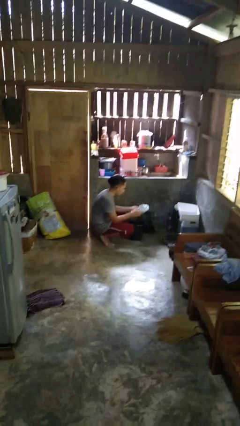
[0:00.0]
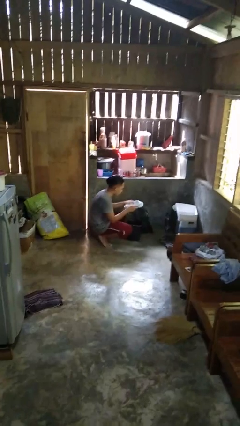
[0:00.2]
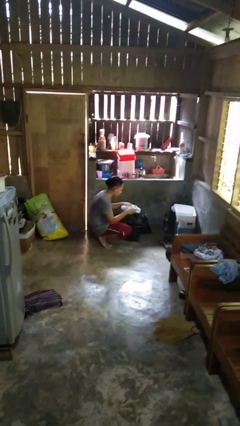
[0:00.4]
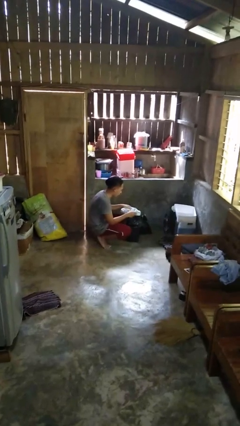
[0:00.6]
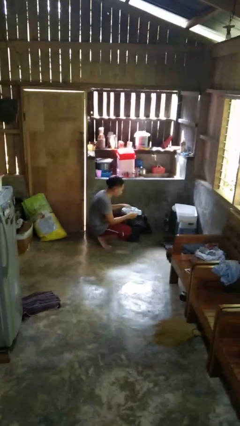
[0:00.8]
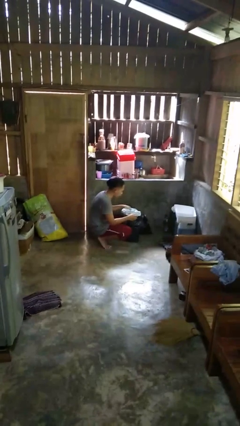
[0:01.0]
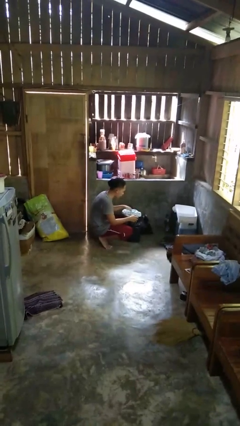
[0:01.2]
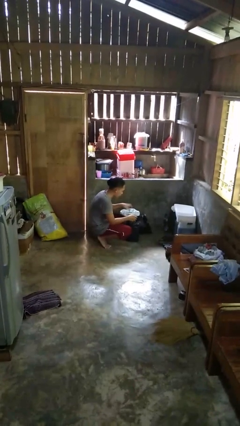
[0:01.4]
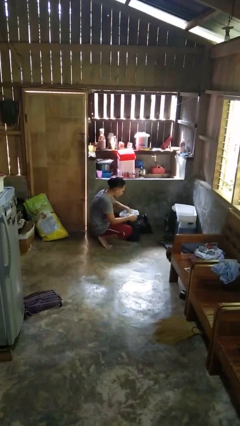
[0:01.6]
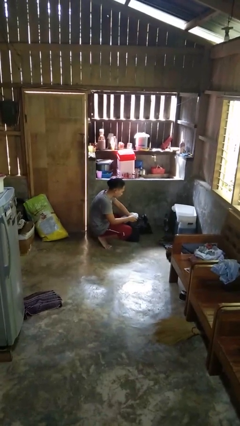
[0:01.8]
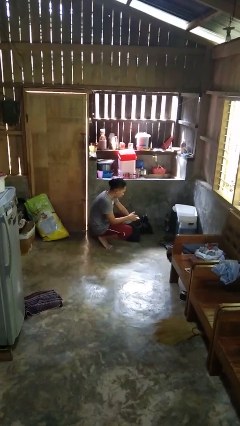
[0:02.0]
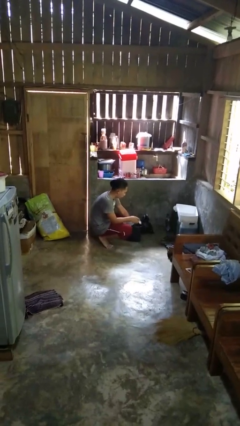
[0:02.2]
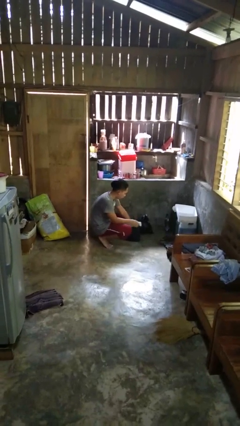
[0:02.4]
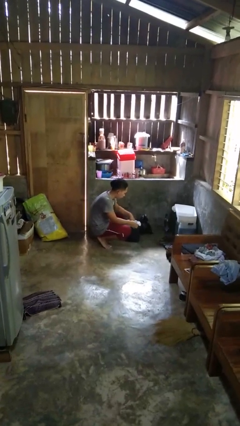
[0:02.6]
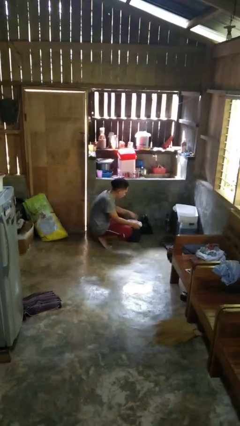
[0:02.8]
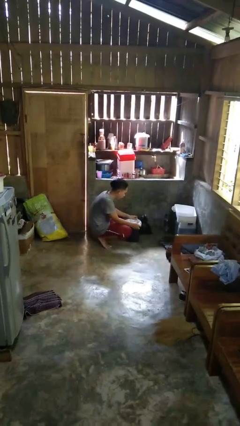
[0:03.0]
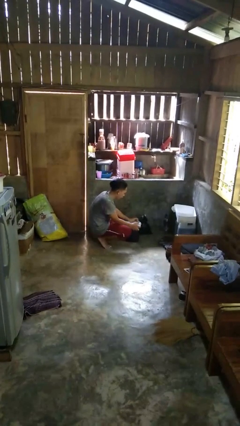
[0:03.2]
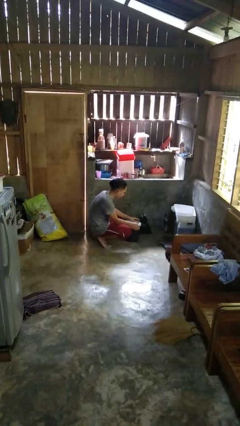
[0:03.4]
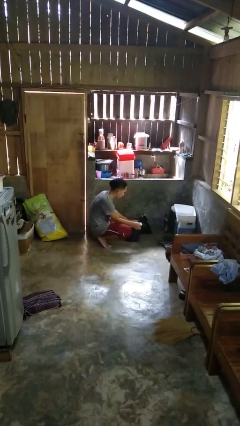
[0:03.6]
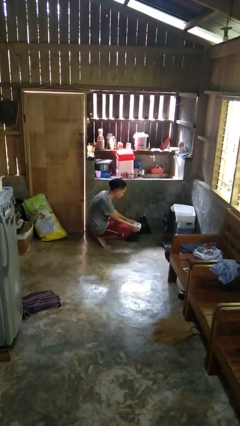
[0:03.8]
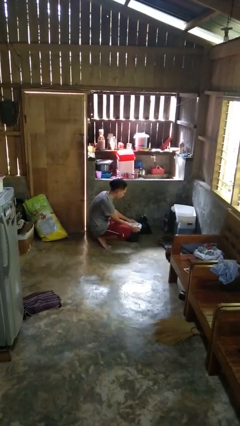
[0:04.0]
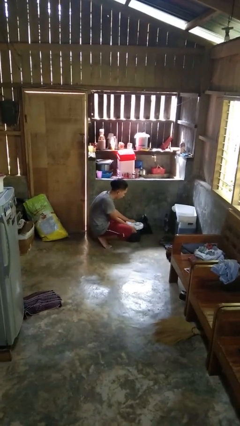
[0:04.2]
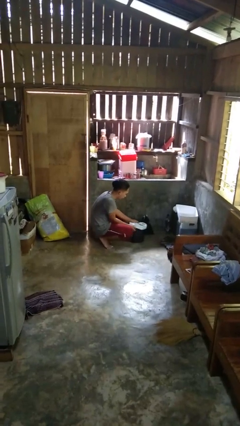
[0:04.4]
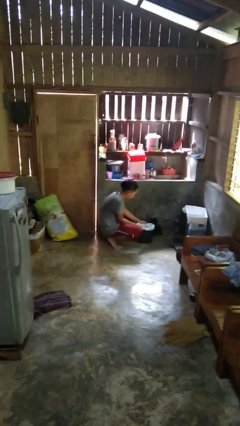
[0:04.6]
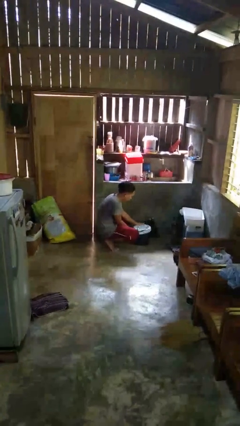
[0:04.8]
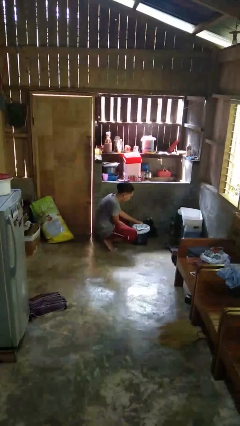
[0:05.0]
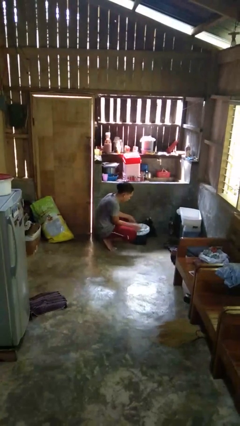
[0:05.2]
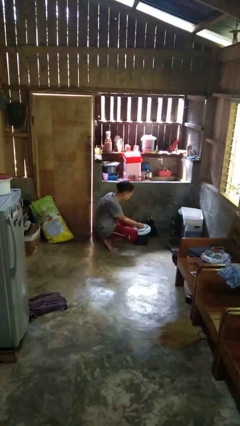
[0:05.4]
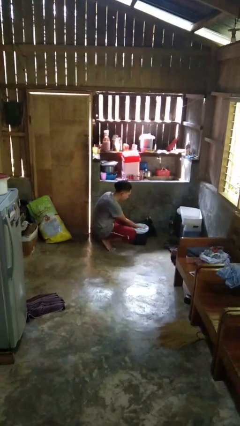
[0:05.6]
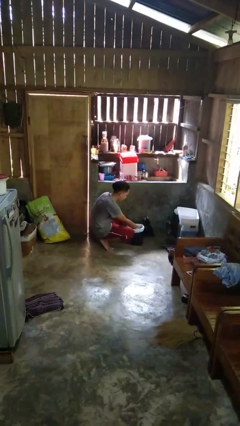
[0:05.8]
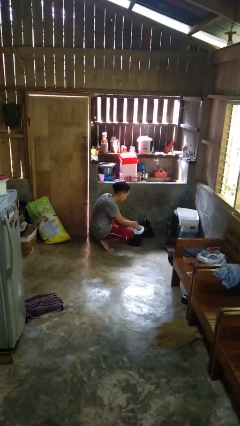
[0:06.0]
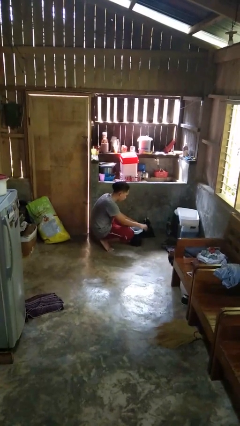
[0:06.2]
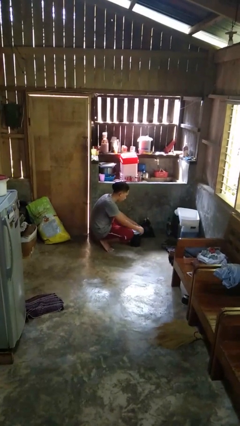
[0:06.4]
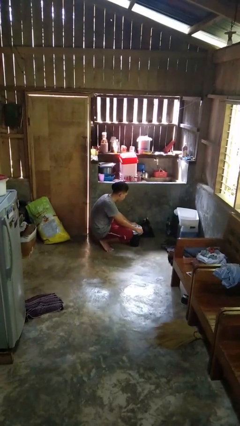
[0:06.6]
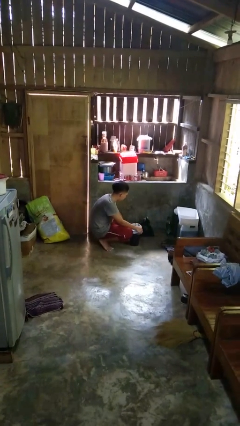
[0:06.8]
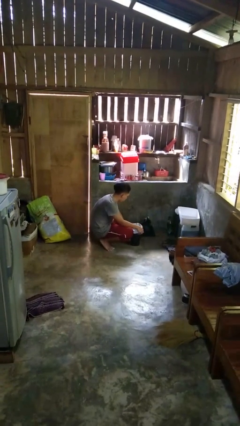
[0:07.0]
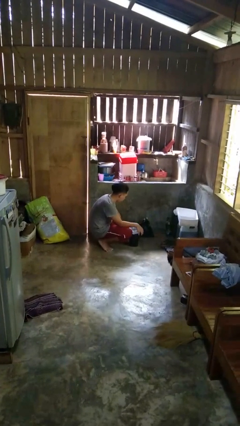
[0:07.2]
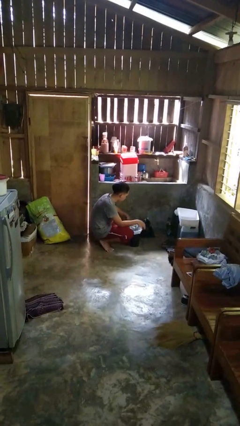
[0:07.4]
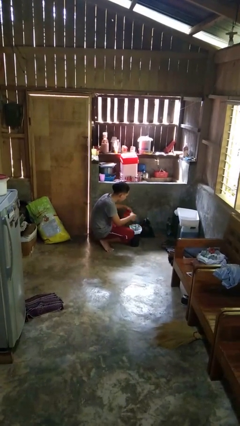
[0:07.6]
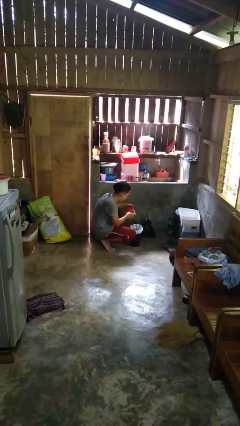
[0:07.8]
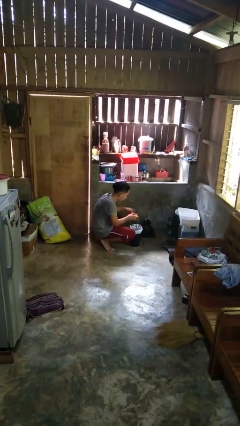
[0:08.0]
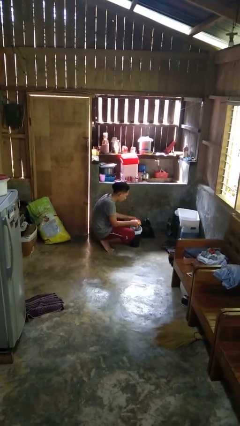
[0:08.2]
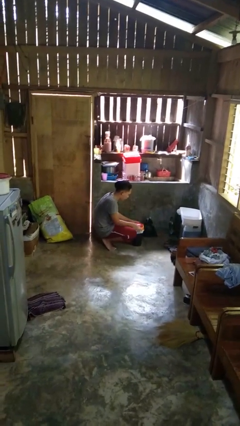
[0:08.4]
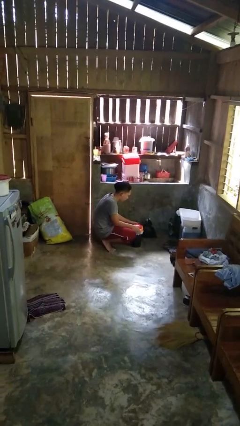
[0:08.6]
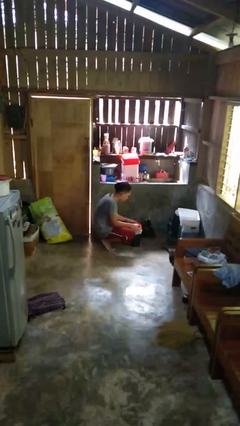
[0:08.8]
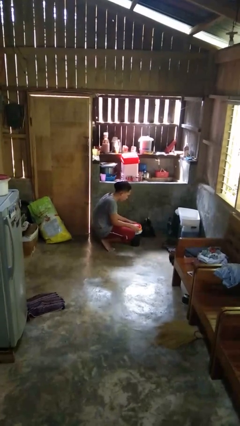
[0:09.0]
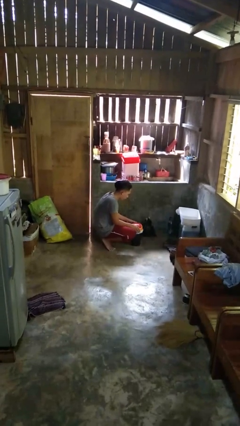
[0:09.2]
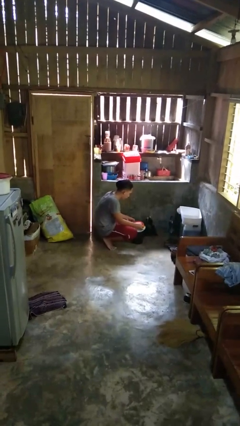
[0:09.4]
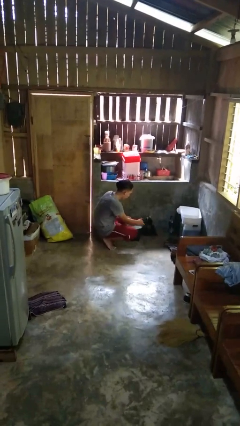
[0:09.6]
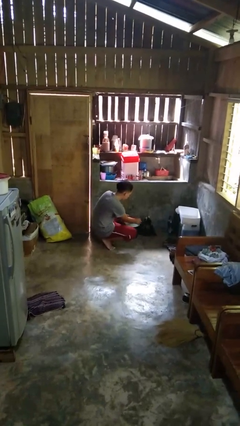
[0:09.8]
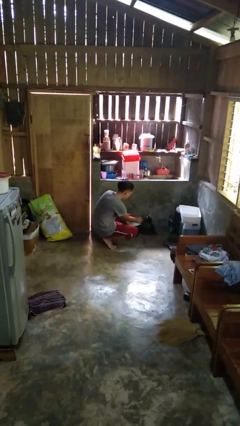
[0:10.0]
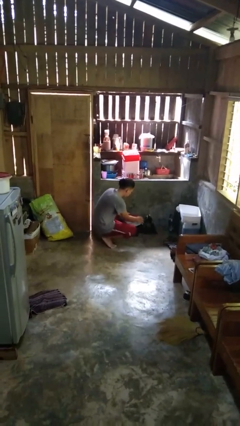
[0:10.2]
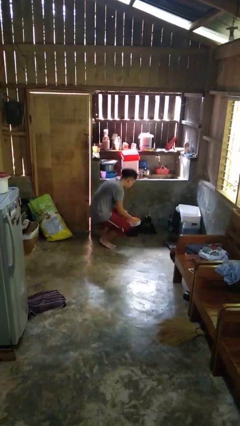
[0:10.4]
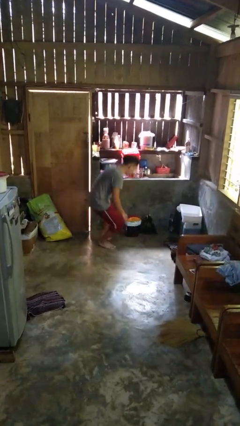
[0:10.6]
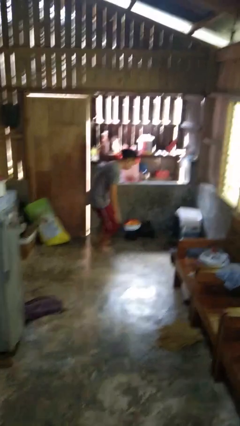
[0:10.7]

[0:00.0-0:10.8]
person inserts trashbag into trashcan

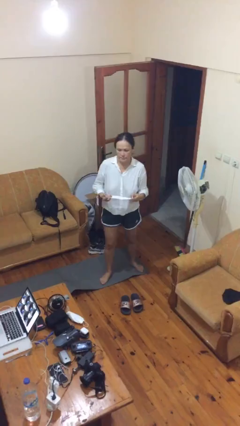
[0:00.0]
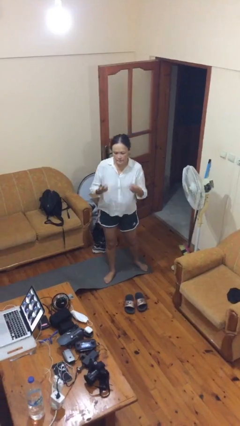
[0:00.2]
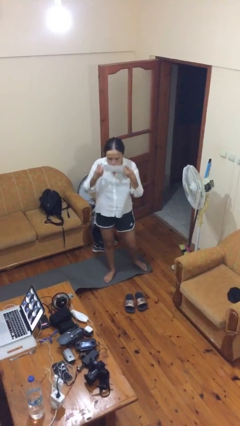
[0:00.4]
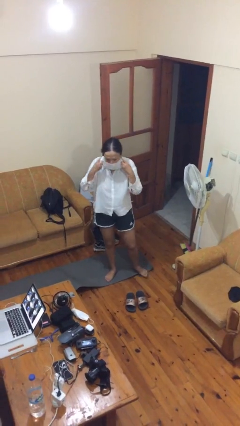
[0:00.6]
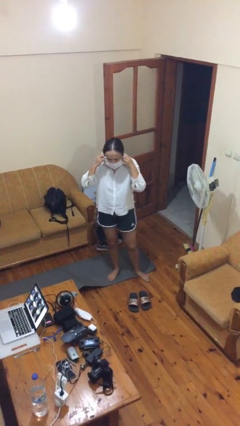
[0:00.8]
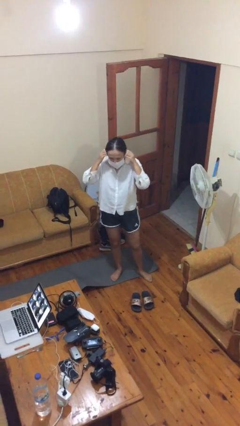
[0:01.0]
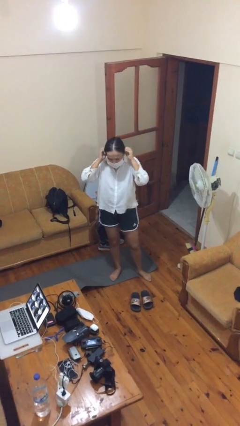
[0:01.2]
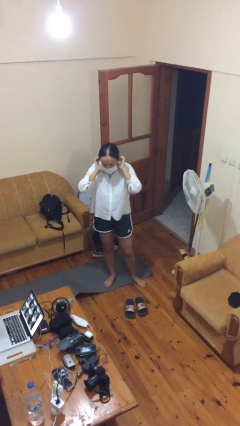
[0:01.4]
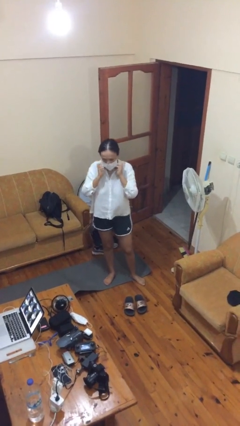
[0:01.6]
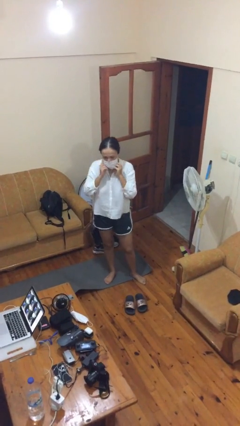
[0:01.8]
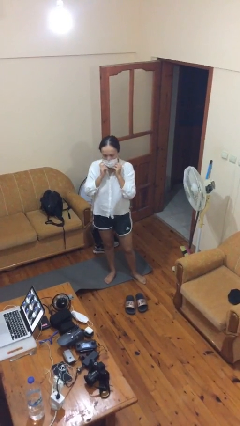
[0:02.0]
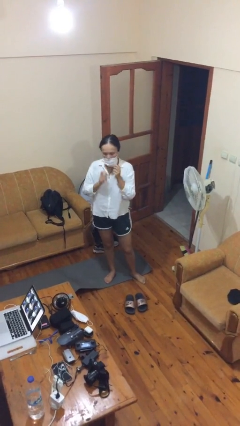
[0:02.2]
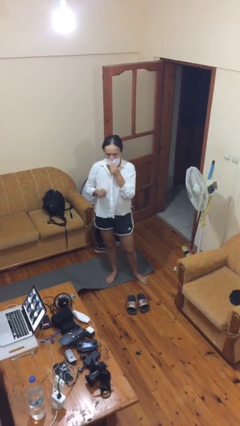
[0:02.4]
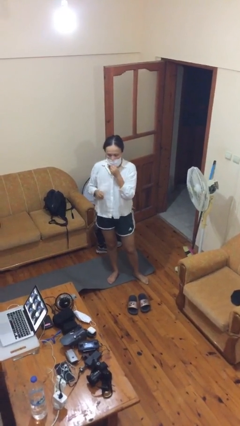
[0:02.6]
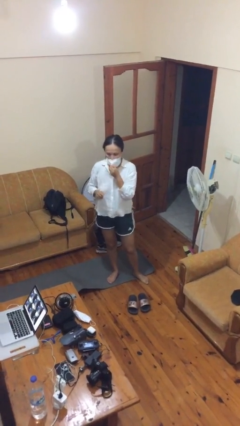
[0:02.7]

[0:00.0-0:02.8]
person puts on facemask

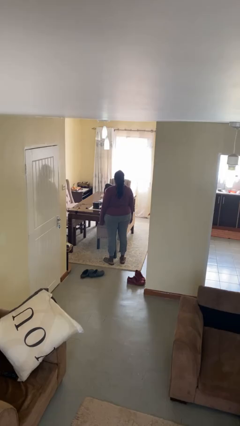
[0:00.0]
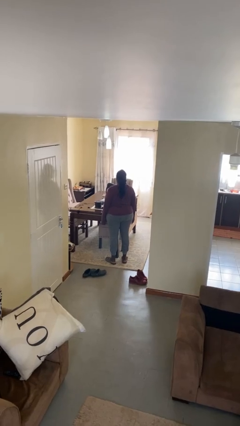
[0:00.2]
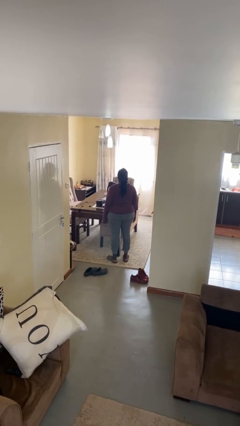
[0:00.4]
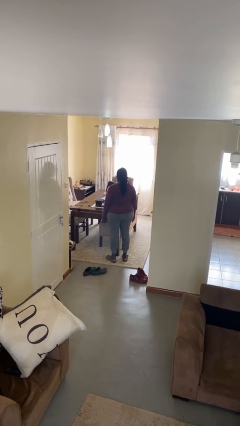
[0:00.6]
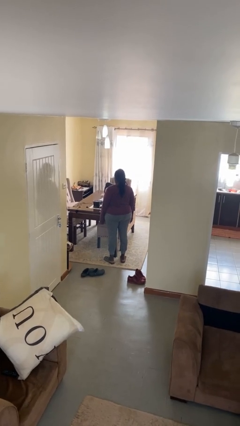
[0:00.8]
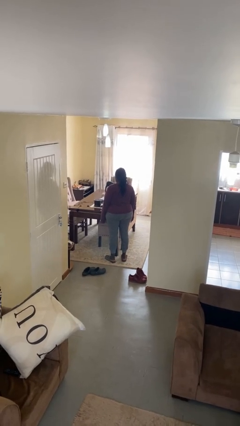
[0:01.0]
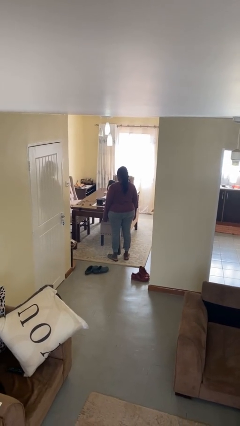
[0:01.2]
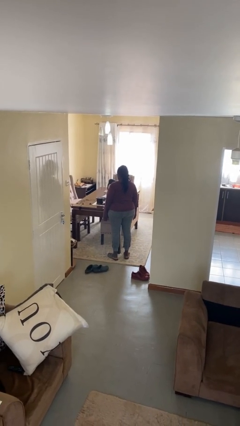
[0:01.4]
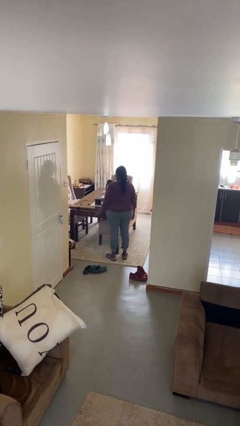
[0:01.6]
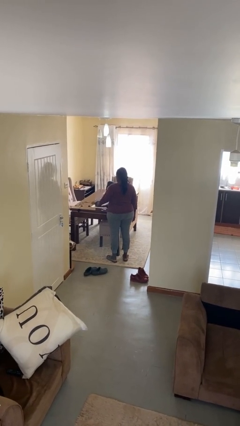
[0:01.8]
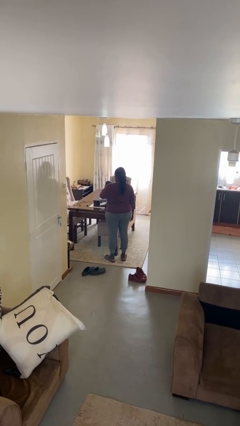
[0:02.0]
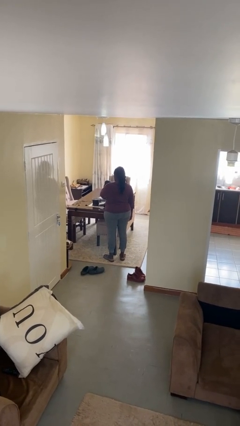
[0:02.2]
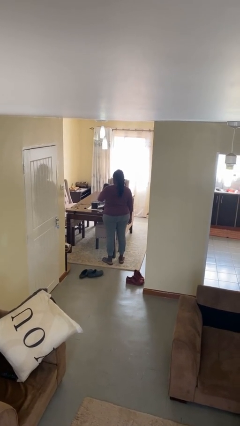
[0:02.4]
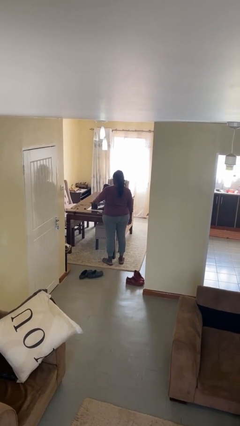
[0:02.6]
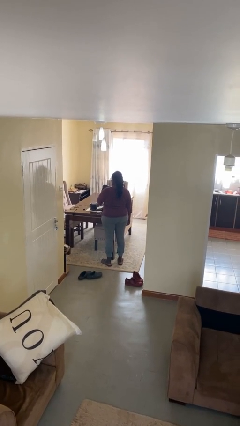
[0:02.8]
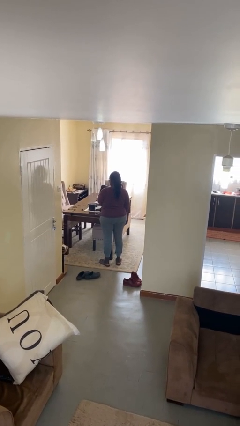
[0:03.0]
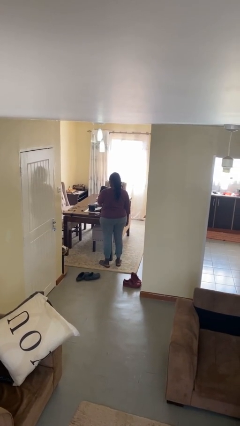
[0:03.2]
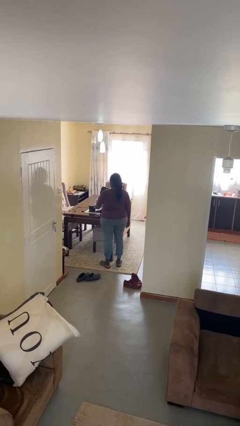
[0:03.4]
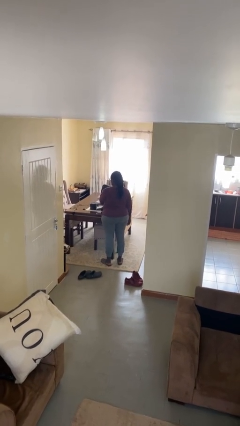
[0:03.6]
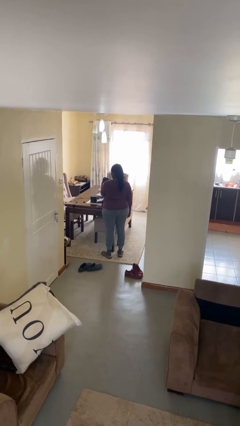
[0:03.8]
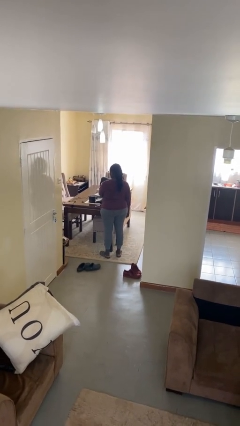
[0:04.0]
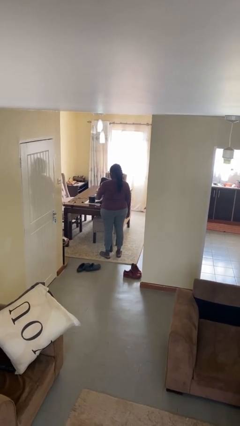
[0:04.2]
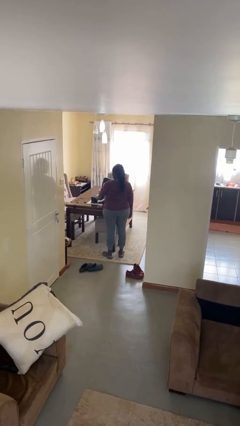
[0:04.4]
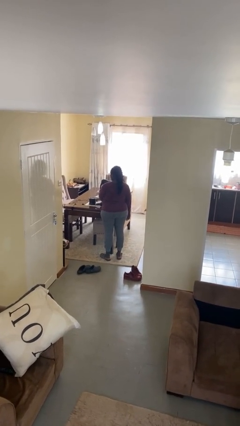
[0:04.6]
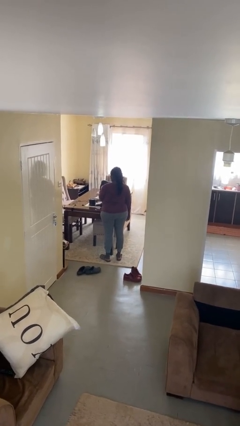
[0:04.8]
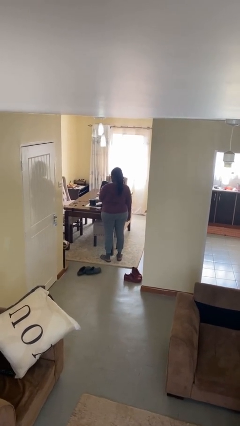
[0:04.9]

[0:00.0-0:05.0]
person waves hand over object
